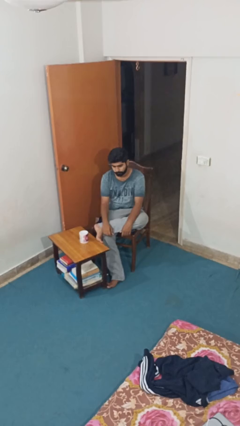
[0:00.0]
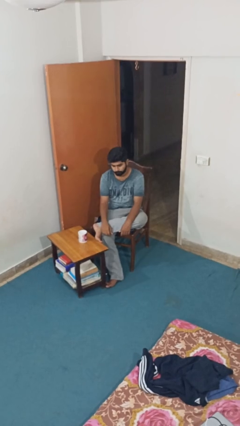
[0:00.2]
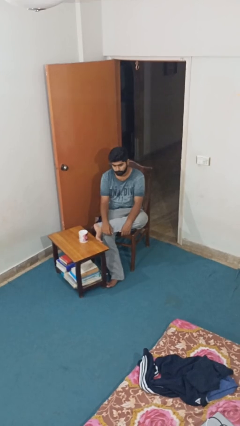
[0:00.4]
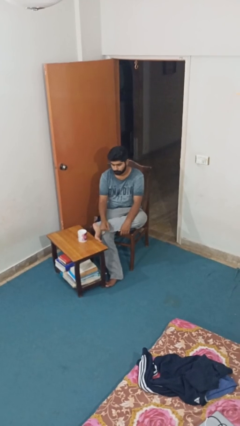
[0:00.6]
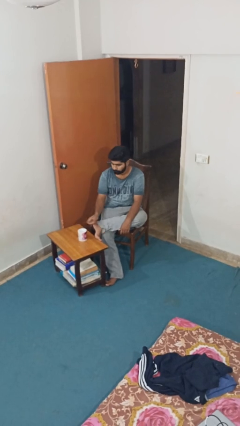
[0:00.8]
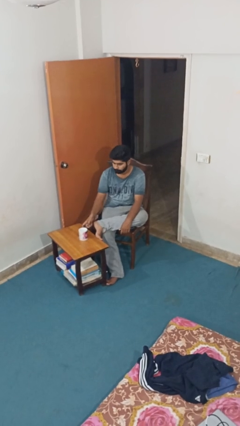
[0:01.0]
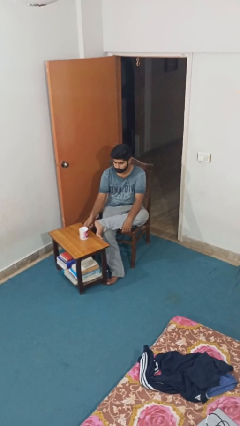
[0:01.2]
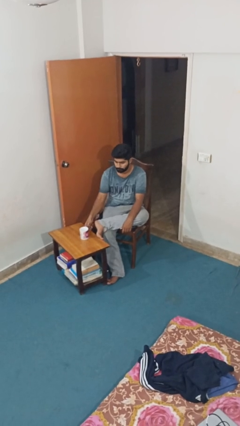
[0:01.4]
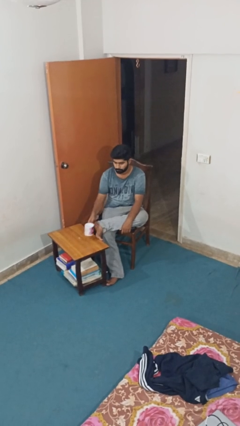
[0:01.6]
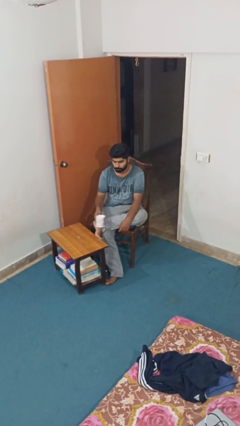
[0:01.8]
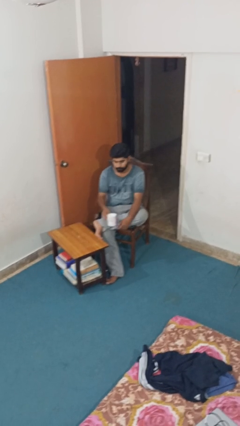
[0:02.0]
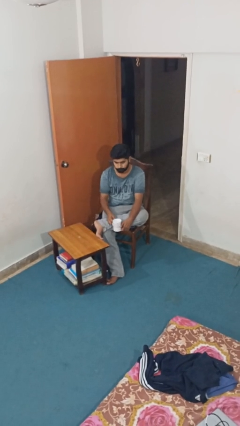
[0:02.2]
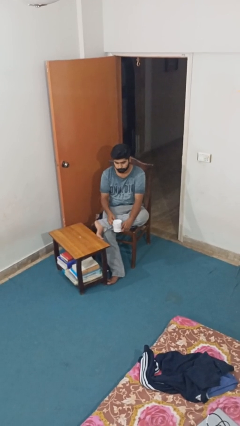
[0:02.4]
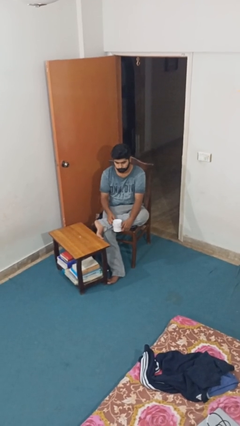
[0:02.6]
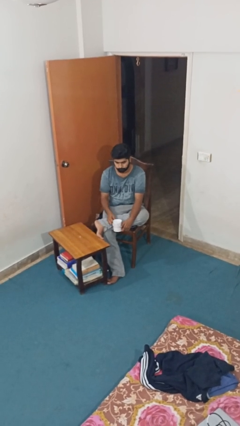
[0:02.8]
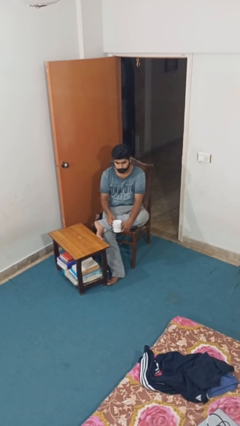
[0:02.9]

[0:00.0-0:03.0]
person picks up object from table

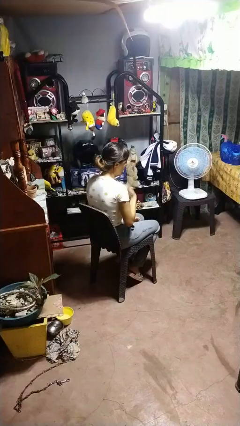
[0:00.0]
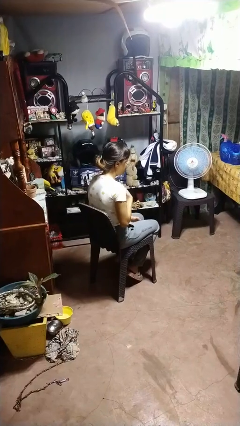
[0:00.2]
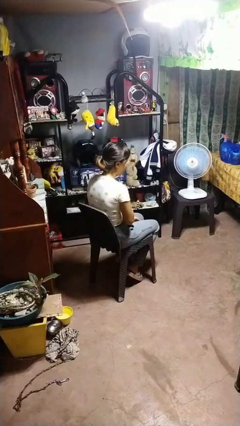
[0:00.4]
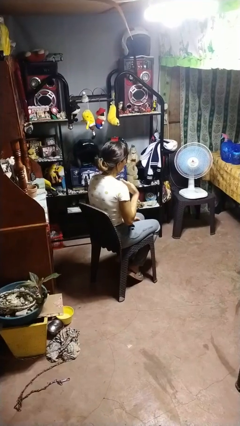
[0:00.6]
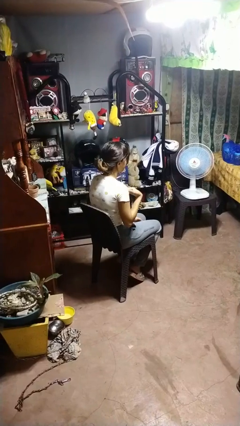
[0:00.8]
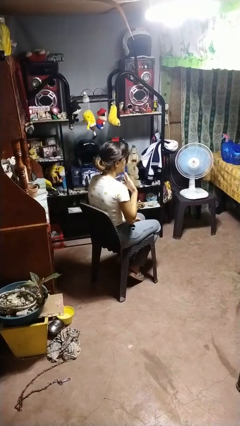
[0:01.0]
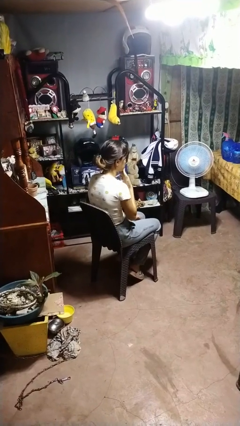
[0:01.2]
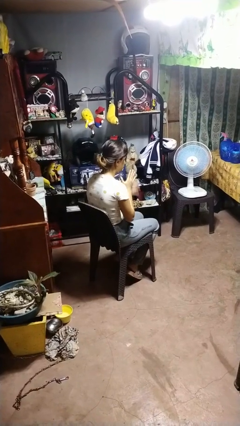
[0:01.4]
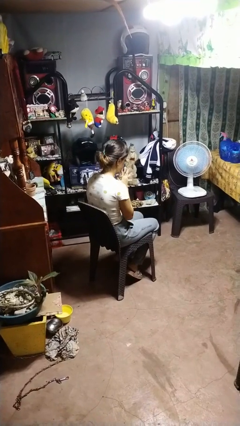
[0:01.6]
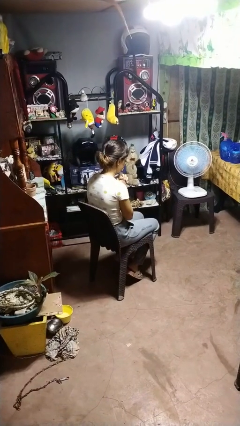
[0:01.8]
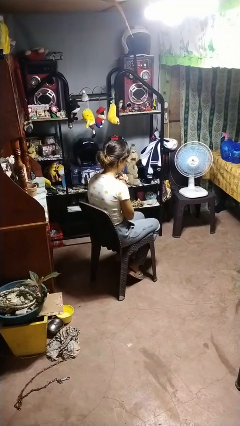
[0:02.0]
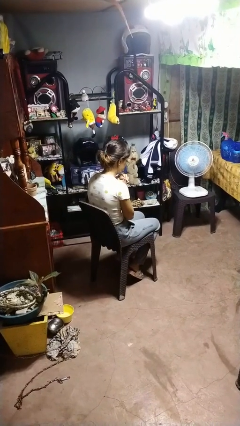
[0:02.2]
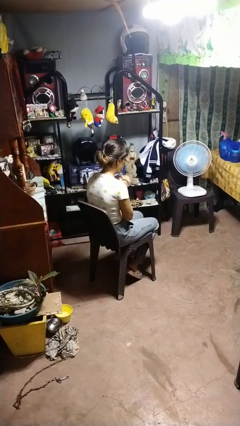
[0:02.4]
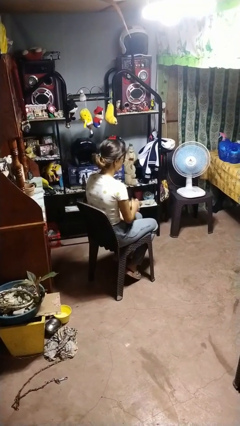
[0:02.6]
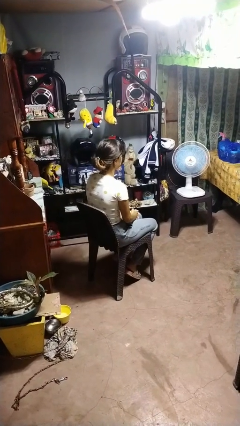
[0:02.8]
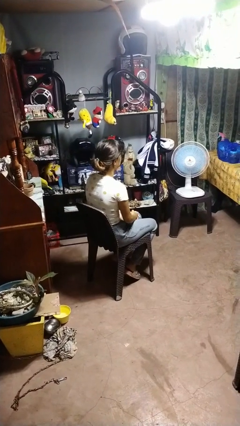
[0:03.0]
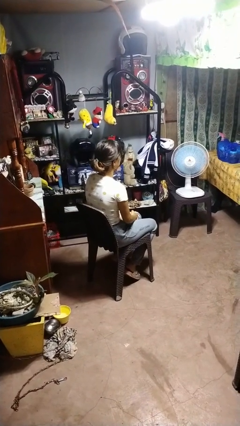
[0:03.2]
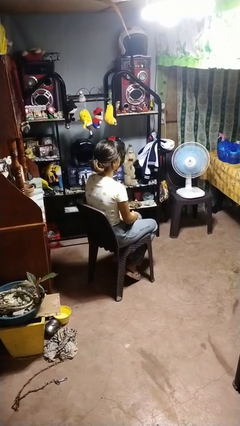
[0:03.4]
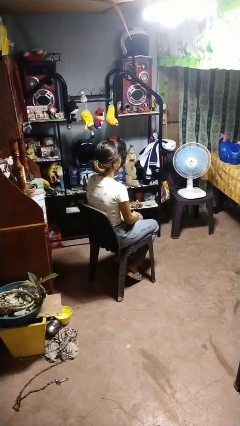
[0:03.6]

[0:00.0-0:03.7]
person prays

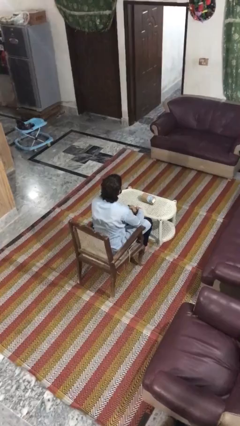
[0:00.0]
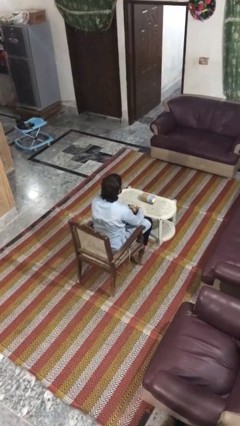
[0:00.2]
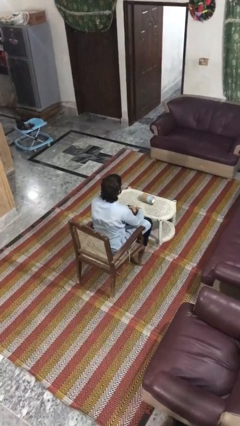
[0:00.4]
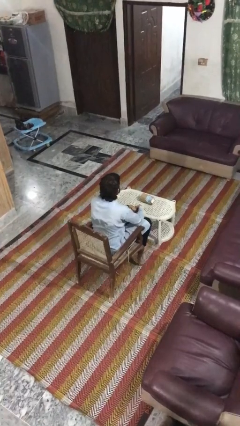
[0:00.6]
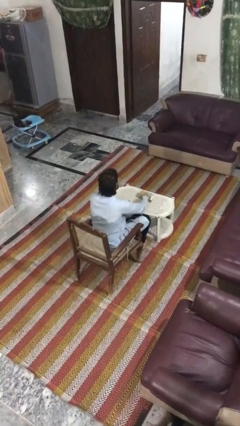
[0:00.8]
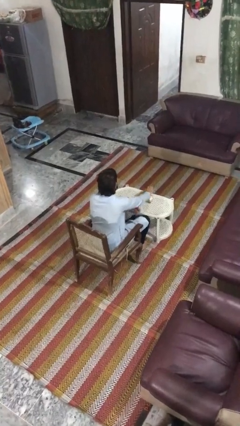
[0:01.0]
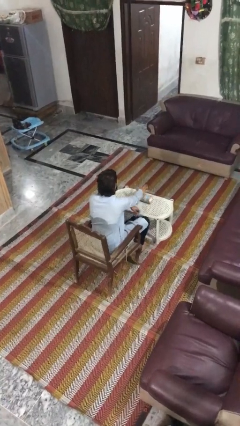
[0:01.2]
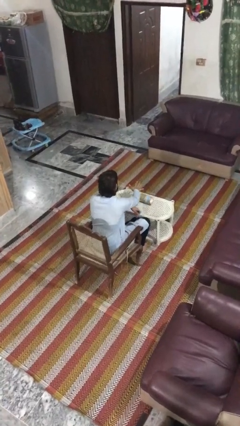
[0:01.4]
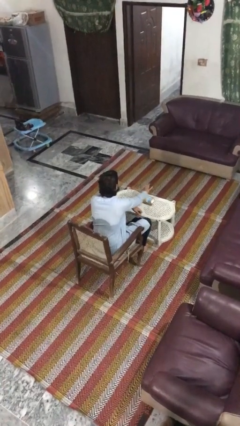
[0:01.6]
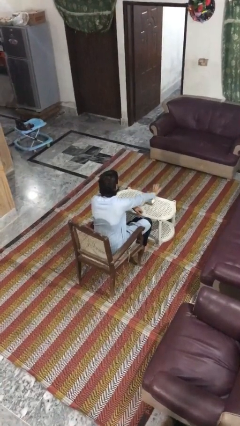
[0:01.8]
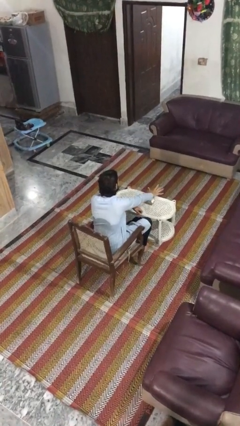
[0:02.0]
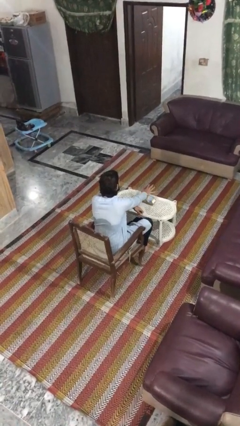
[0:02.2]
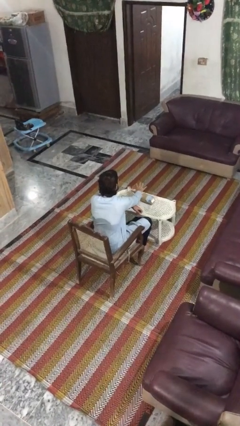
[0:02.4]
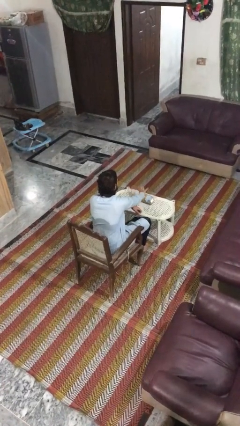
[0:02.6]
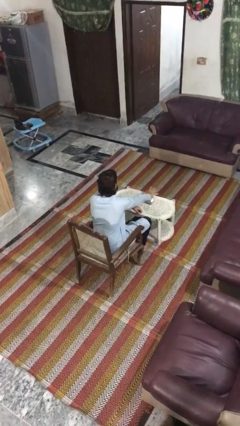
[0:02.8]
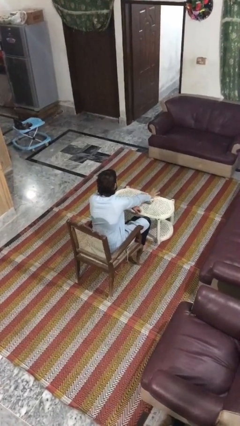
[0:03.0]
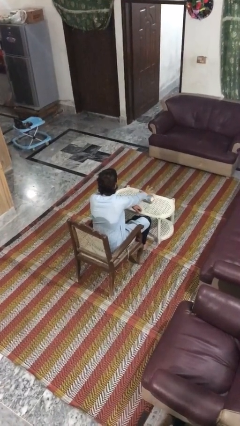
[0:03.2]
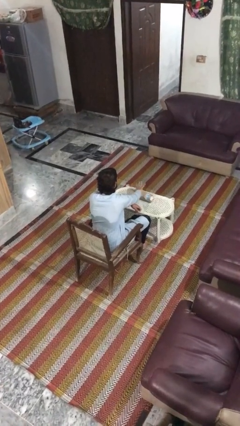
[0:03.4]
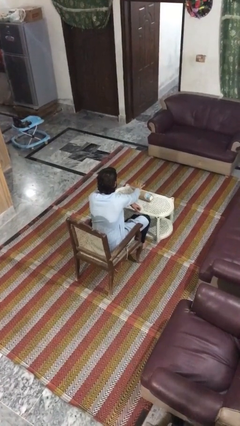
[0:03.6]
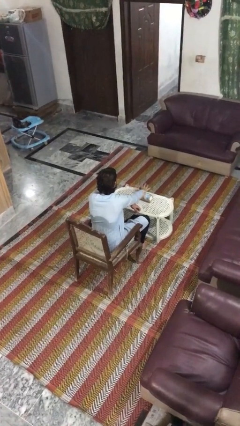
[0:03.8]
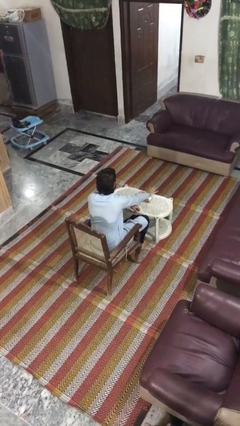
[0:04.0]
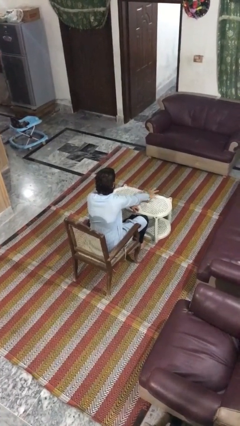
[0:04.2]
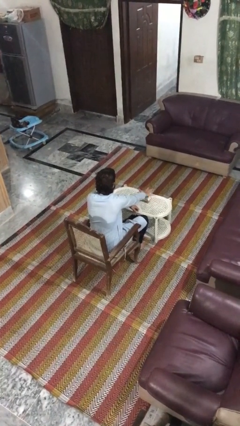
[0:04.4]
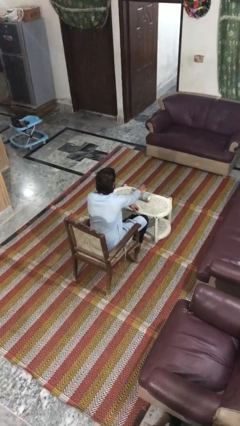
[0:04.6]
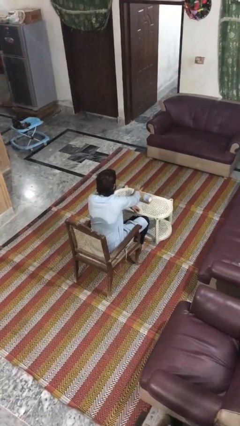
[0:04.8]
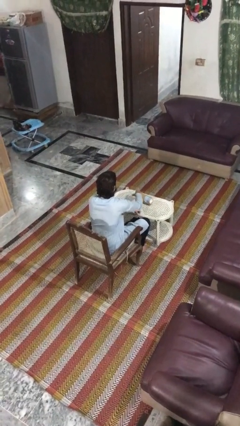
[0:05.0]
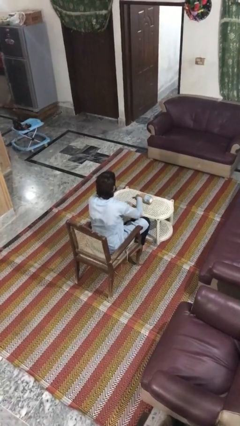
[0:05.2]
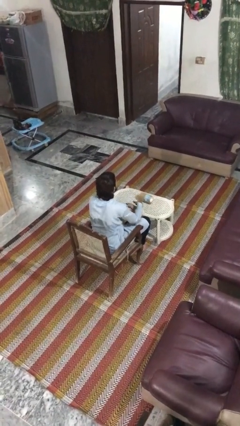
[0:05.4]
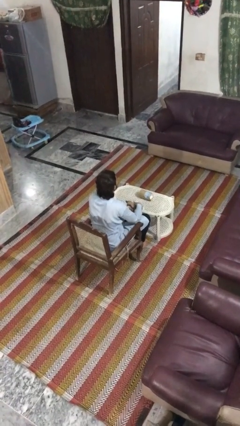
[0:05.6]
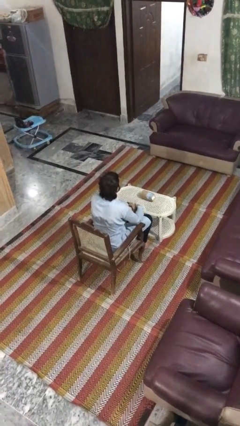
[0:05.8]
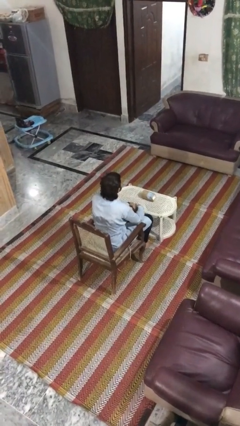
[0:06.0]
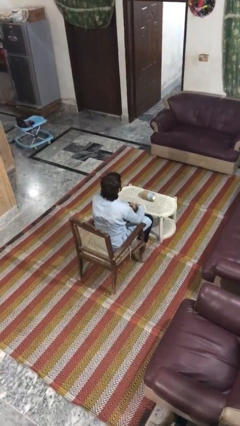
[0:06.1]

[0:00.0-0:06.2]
person waves hand over object

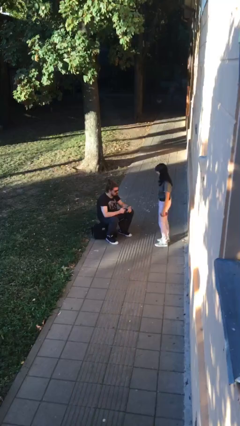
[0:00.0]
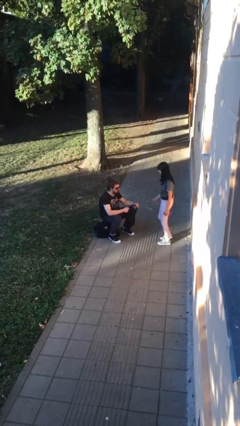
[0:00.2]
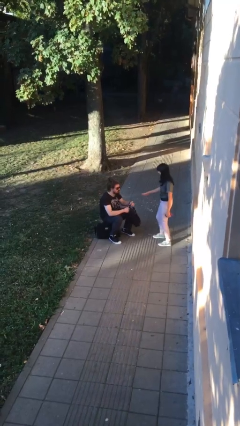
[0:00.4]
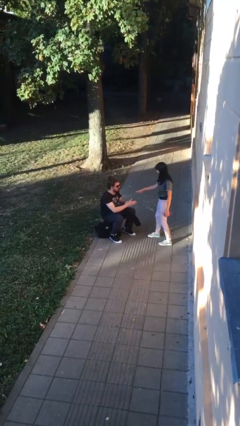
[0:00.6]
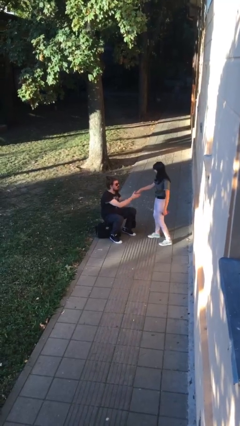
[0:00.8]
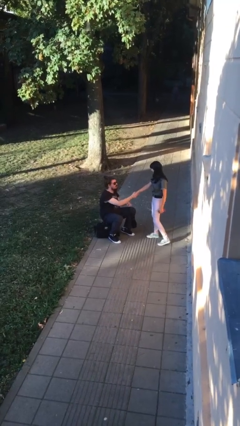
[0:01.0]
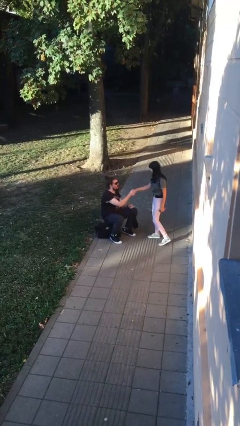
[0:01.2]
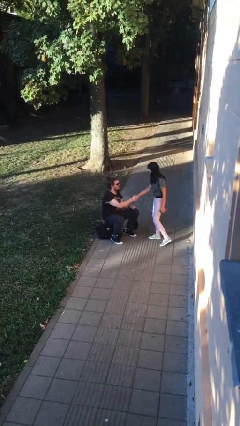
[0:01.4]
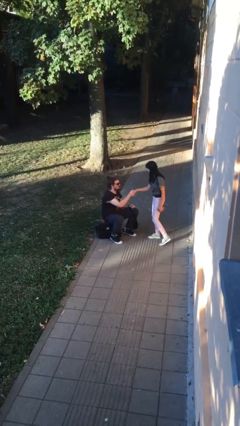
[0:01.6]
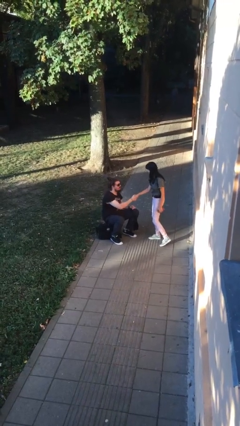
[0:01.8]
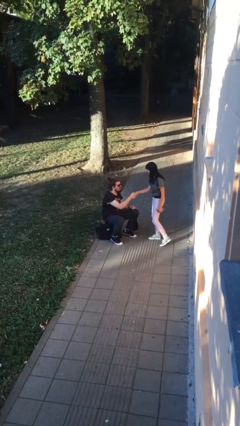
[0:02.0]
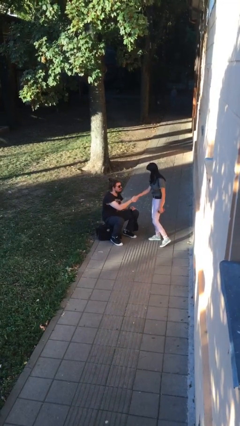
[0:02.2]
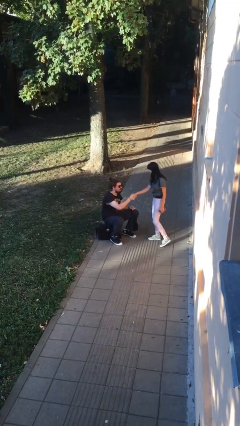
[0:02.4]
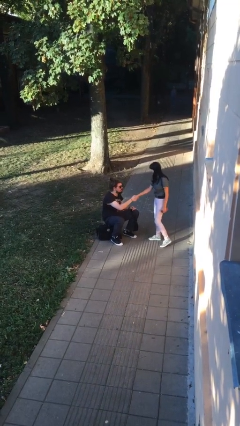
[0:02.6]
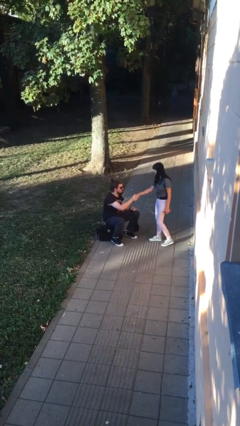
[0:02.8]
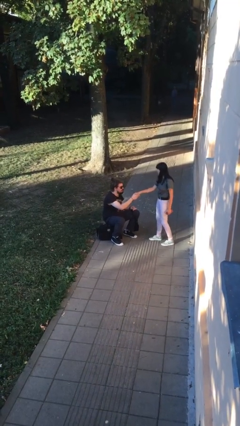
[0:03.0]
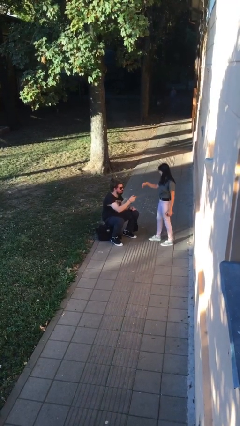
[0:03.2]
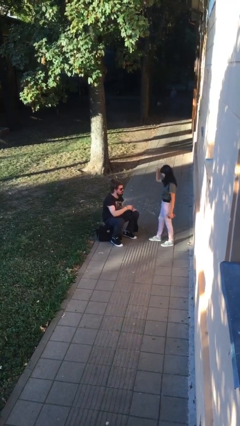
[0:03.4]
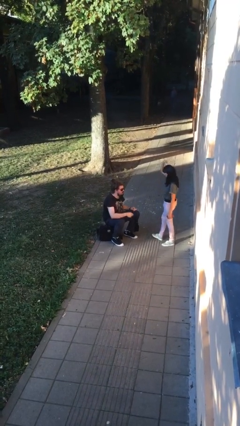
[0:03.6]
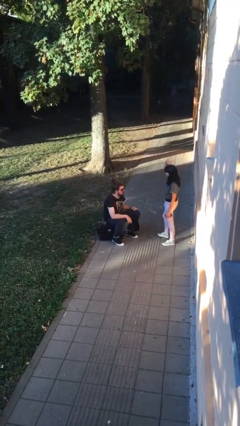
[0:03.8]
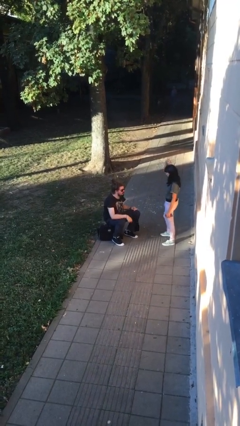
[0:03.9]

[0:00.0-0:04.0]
person shakes hand

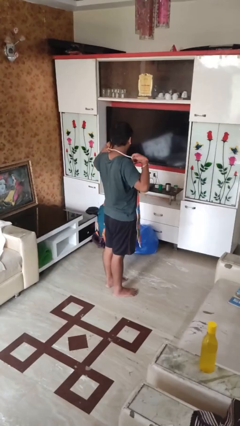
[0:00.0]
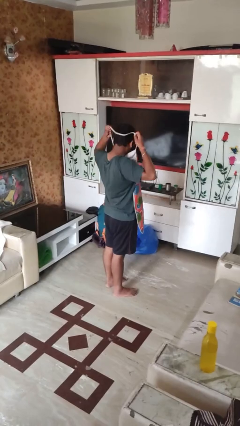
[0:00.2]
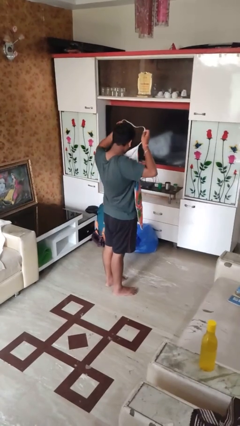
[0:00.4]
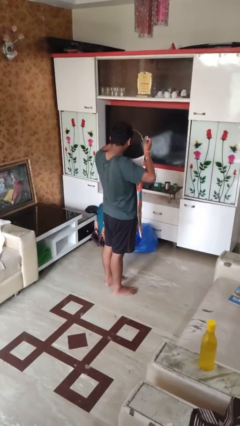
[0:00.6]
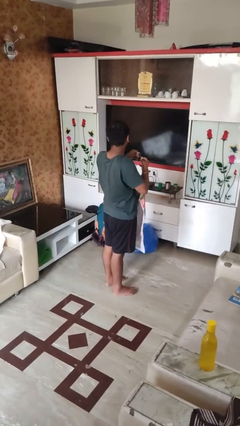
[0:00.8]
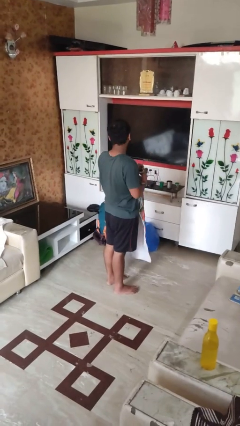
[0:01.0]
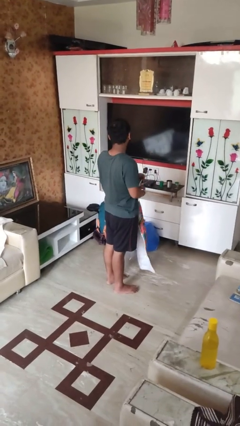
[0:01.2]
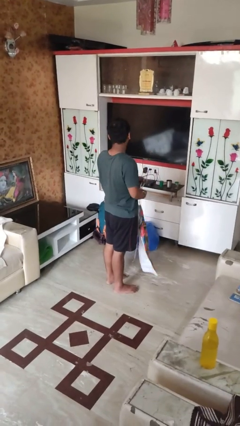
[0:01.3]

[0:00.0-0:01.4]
person takes off apron
